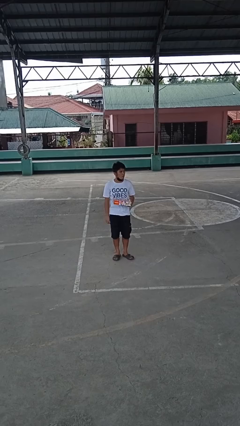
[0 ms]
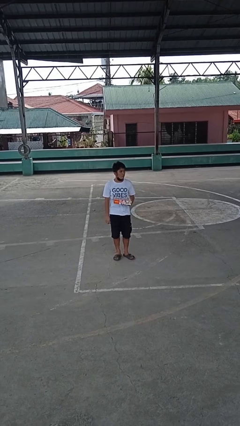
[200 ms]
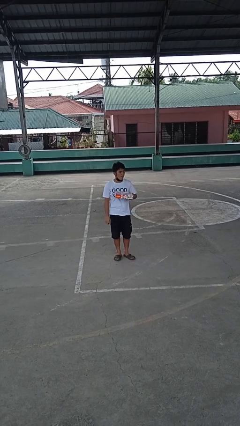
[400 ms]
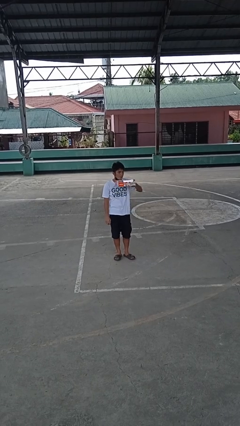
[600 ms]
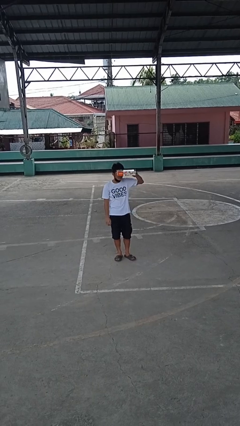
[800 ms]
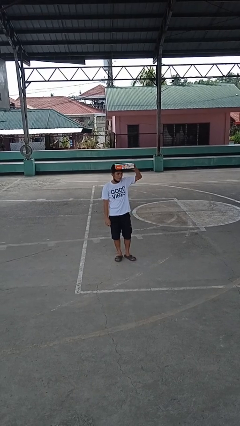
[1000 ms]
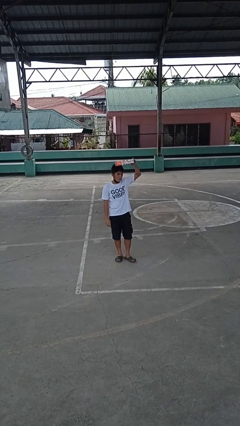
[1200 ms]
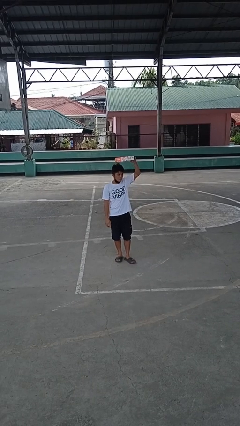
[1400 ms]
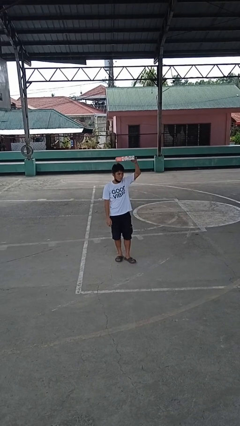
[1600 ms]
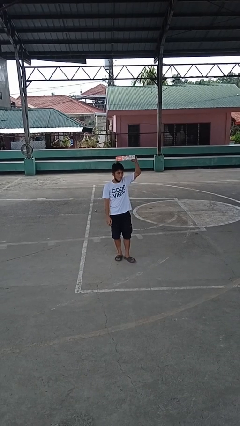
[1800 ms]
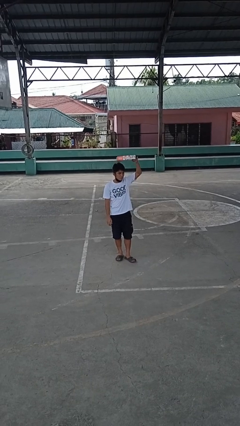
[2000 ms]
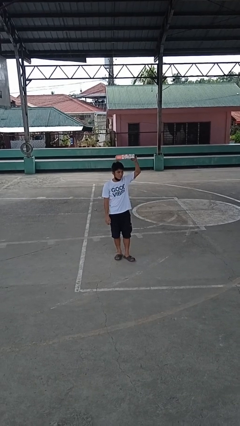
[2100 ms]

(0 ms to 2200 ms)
person holds object above head

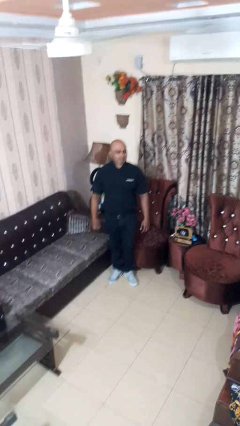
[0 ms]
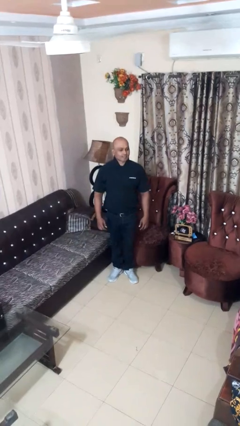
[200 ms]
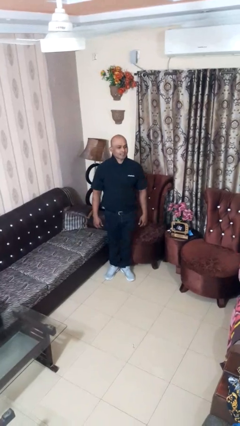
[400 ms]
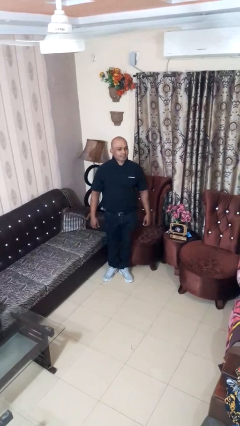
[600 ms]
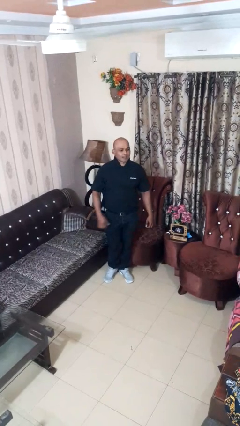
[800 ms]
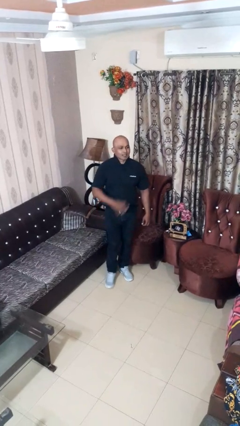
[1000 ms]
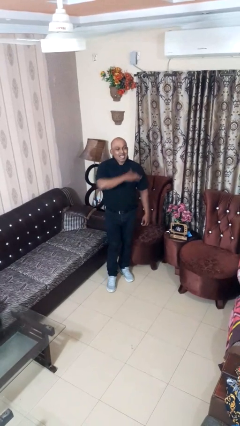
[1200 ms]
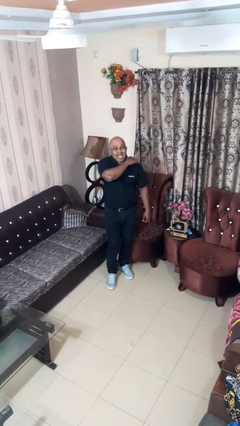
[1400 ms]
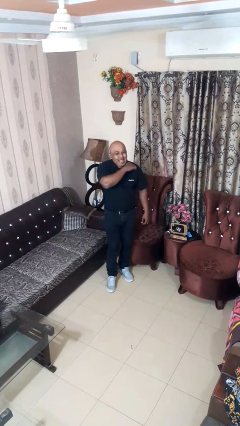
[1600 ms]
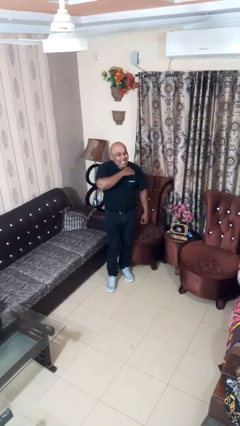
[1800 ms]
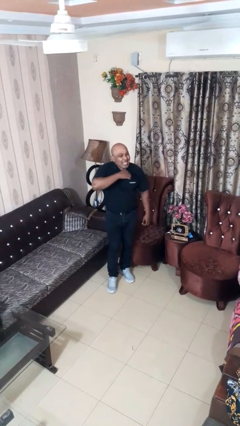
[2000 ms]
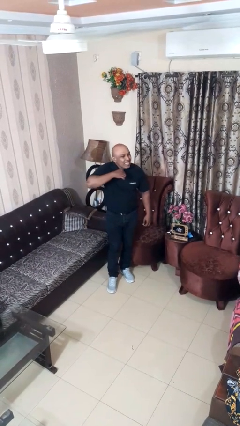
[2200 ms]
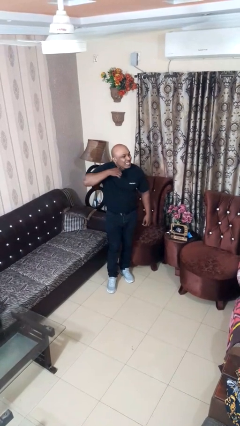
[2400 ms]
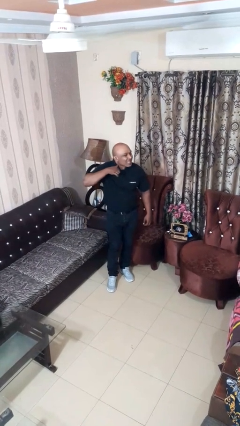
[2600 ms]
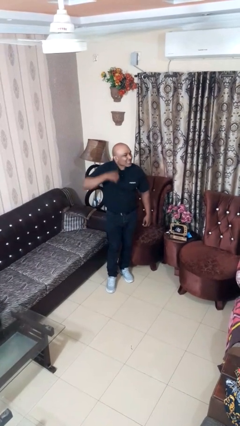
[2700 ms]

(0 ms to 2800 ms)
person gestures cut

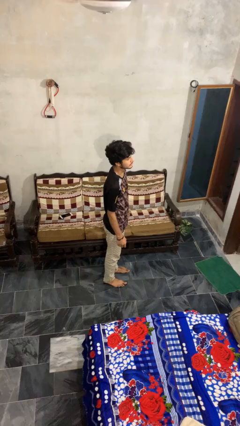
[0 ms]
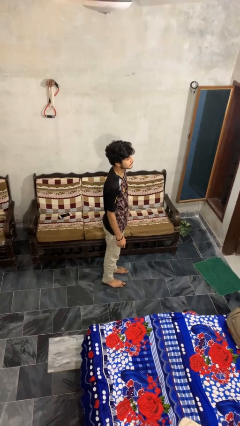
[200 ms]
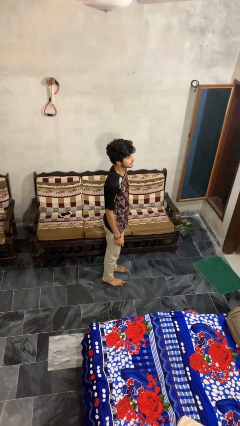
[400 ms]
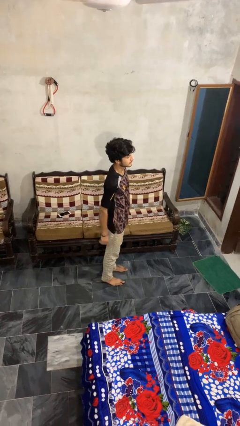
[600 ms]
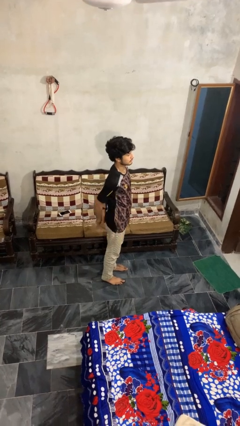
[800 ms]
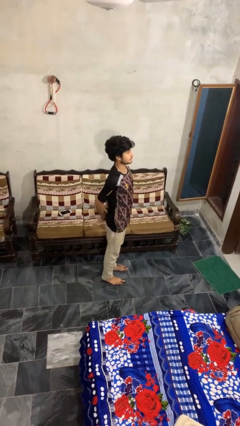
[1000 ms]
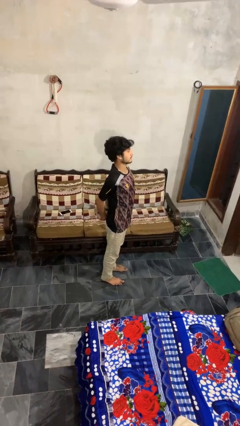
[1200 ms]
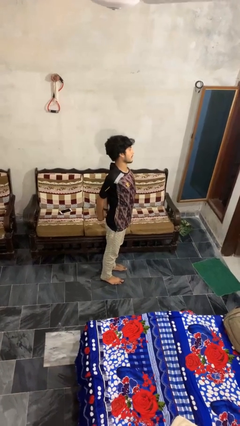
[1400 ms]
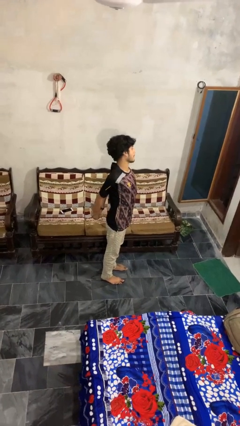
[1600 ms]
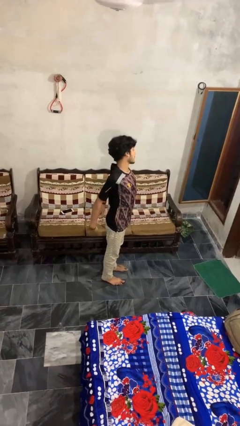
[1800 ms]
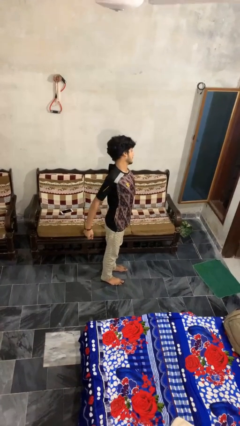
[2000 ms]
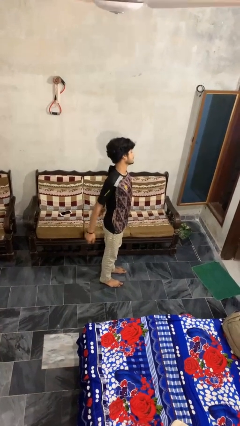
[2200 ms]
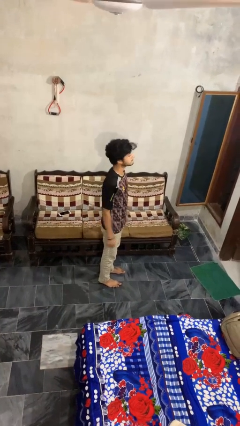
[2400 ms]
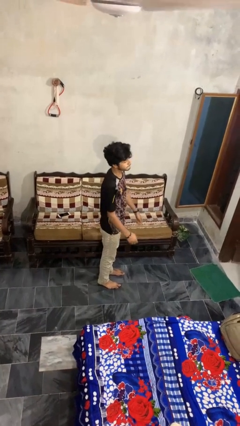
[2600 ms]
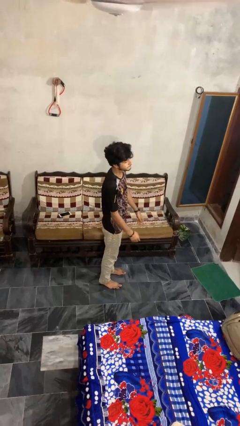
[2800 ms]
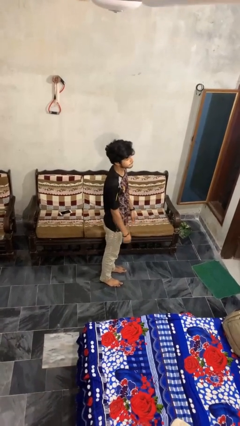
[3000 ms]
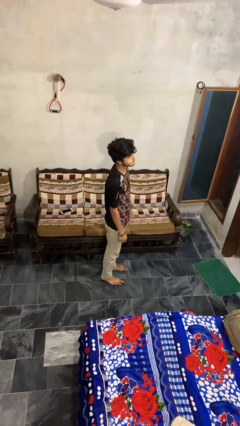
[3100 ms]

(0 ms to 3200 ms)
person stretches back

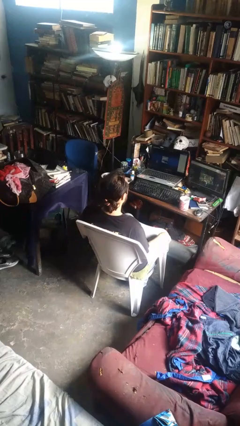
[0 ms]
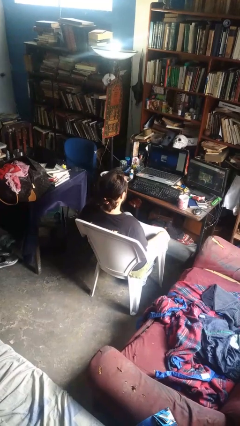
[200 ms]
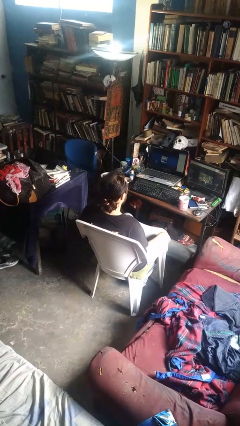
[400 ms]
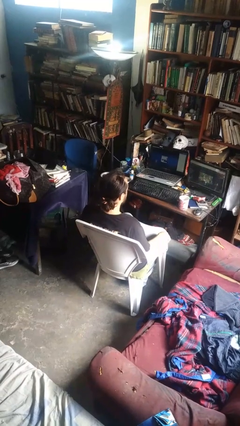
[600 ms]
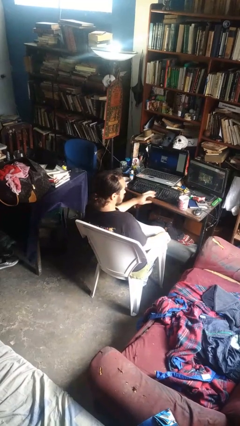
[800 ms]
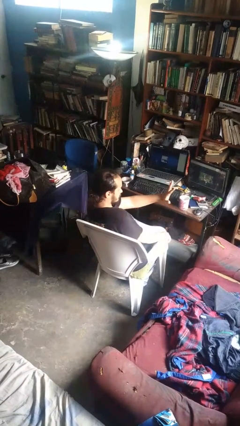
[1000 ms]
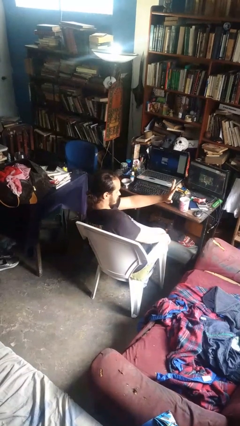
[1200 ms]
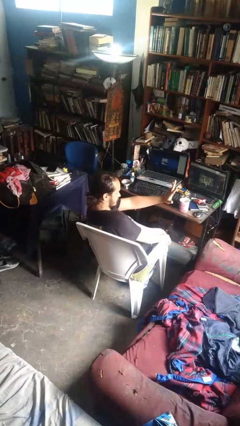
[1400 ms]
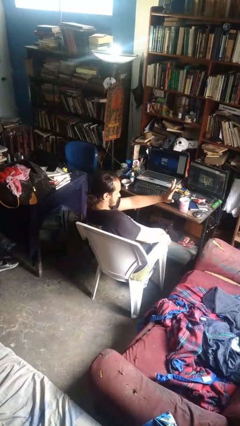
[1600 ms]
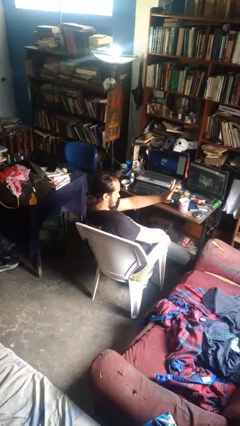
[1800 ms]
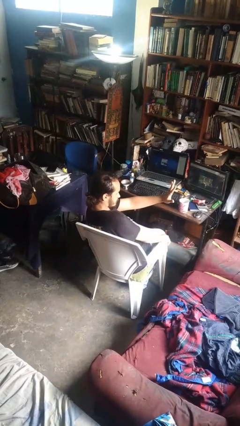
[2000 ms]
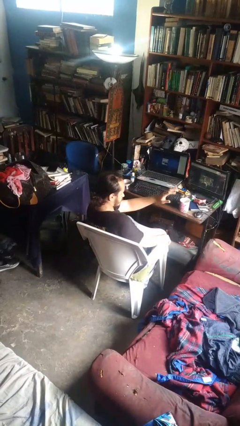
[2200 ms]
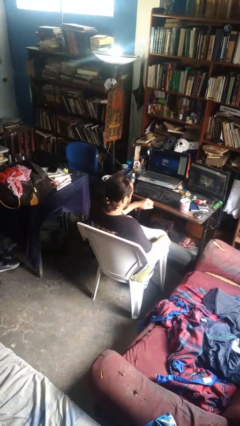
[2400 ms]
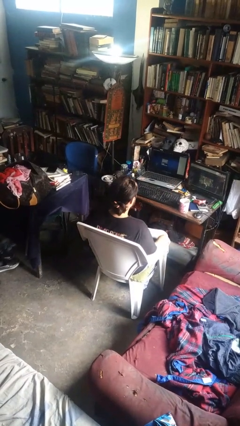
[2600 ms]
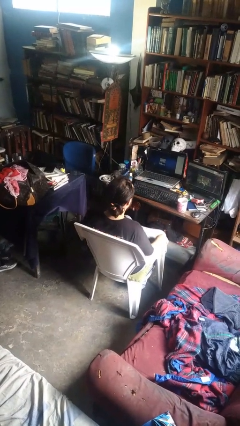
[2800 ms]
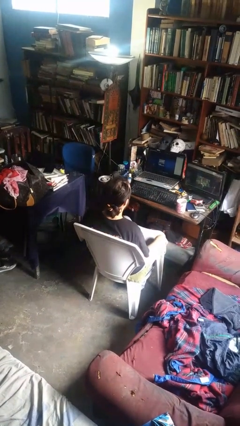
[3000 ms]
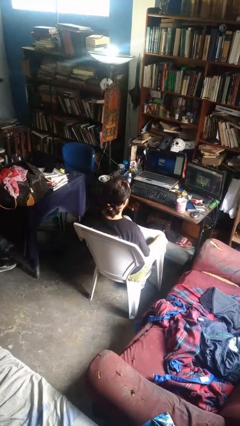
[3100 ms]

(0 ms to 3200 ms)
person gestures number five

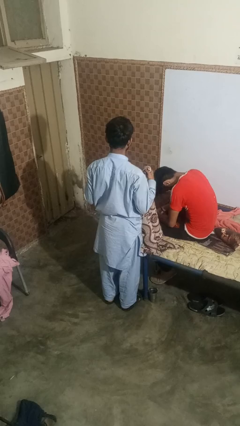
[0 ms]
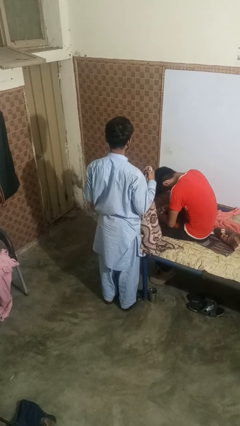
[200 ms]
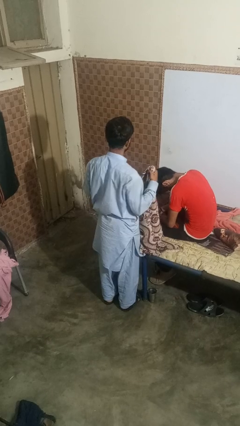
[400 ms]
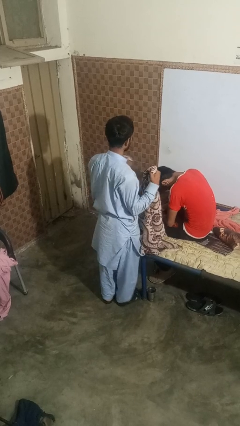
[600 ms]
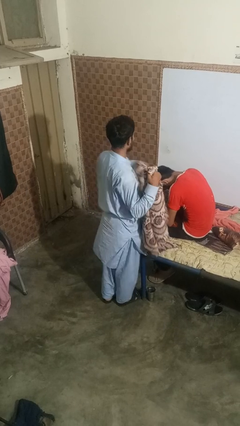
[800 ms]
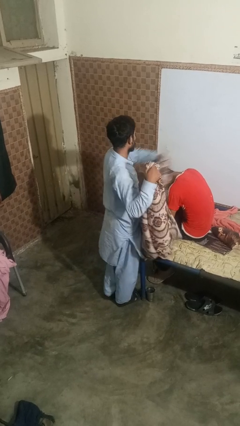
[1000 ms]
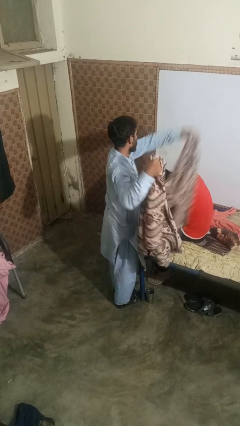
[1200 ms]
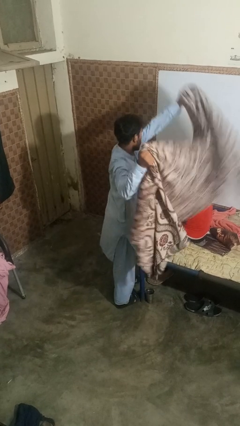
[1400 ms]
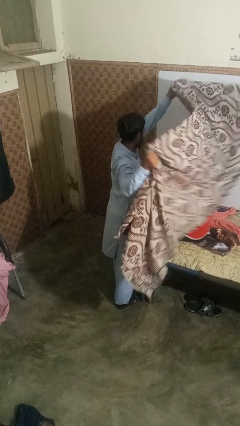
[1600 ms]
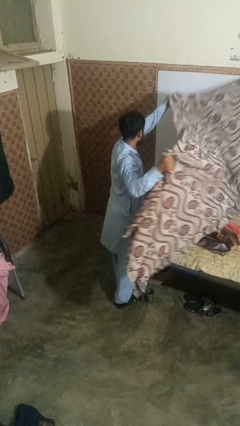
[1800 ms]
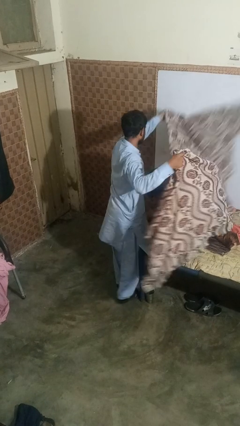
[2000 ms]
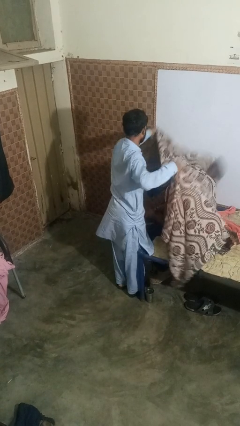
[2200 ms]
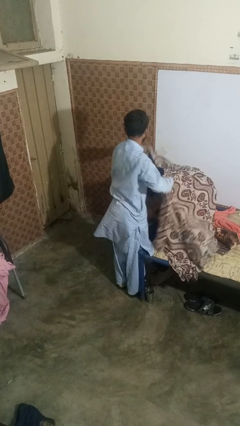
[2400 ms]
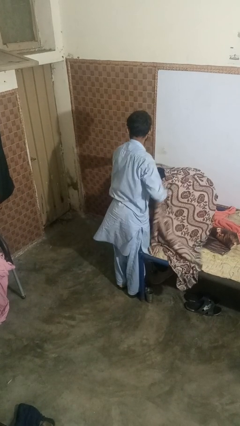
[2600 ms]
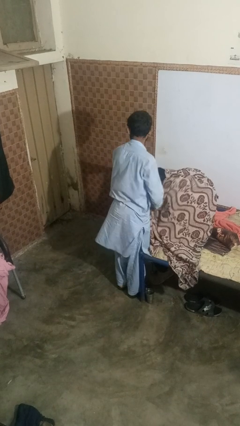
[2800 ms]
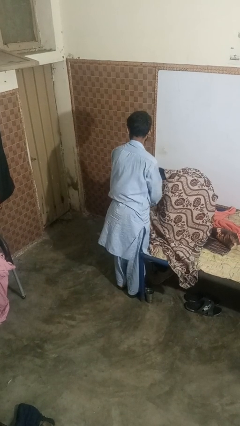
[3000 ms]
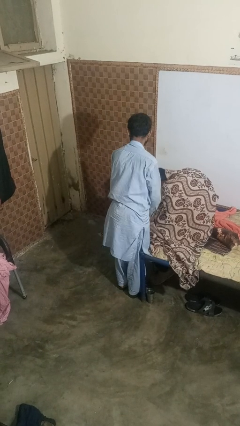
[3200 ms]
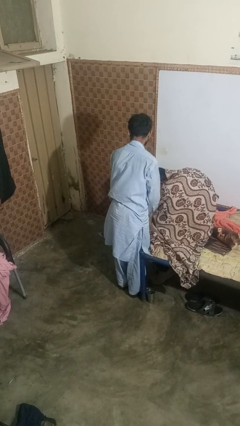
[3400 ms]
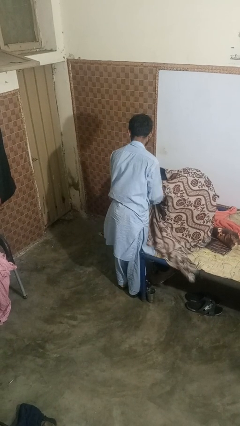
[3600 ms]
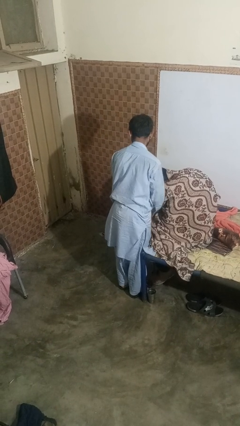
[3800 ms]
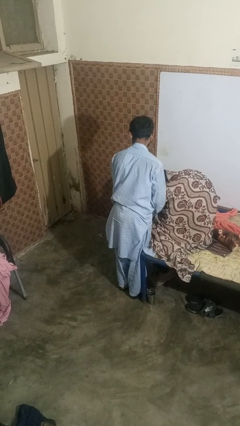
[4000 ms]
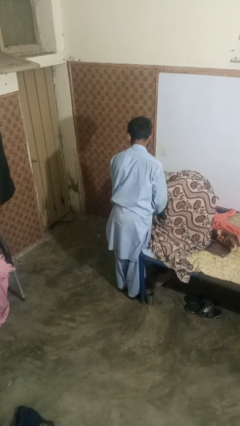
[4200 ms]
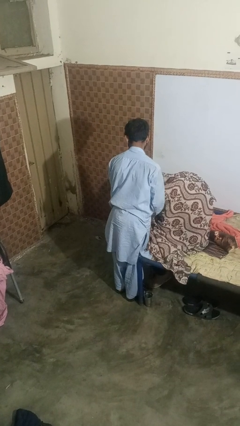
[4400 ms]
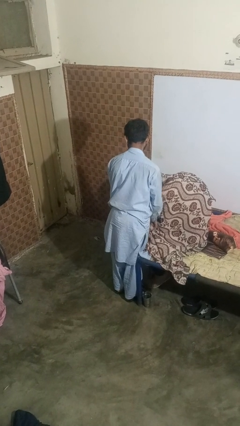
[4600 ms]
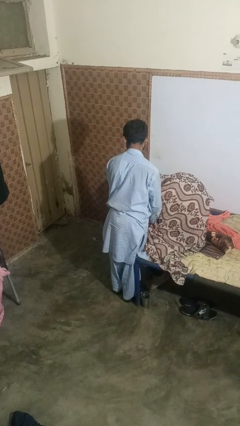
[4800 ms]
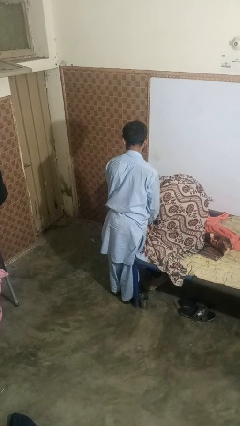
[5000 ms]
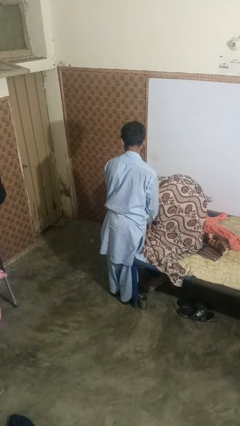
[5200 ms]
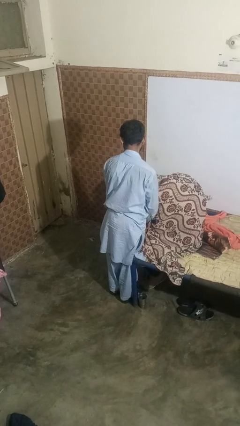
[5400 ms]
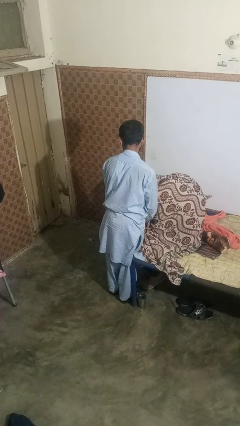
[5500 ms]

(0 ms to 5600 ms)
person covers friend with blanket

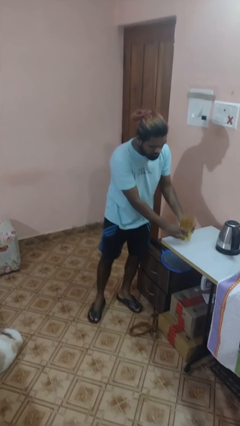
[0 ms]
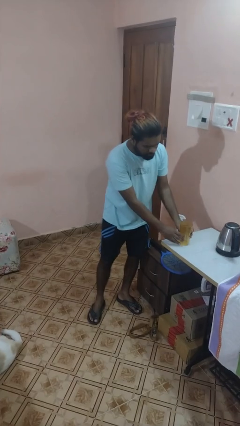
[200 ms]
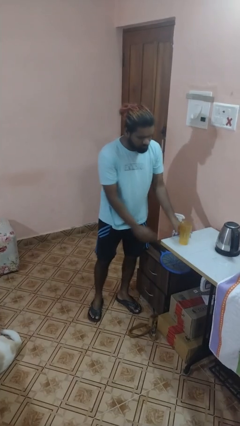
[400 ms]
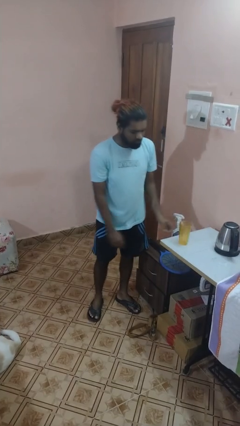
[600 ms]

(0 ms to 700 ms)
person sets upright glass
